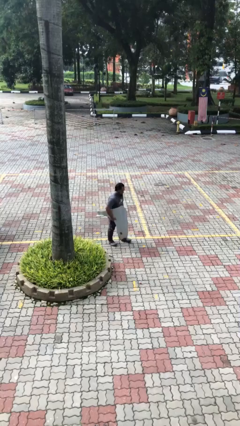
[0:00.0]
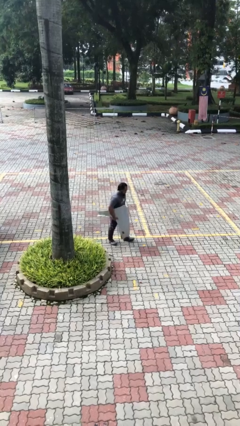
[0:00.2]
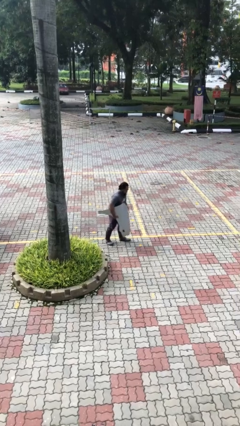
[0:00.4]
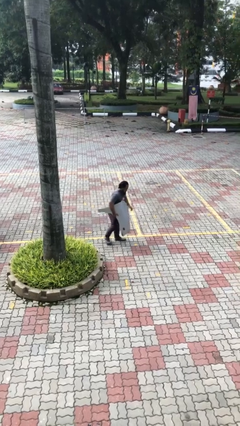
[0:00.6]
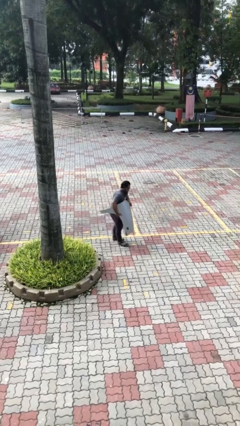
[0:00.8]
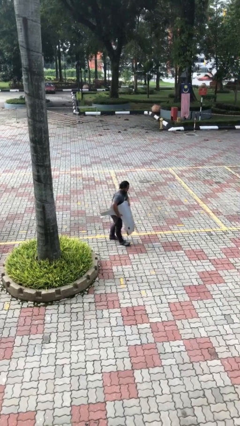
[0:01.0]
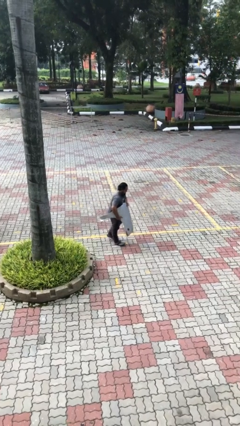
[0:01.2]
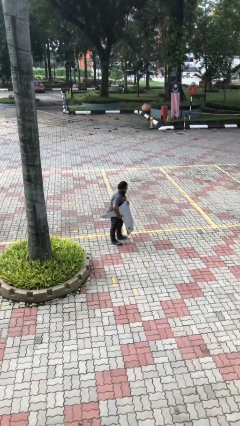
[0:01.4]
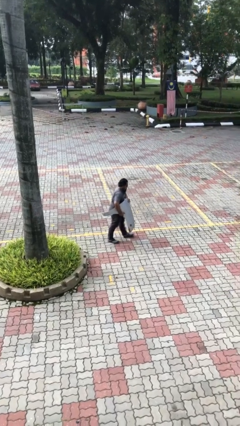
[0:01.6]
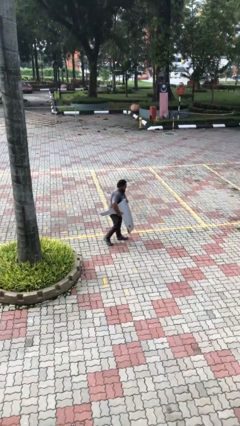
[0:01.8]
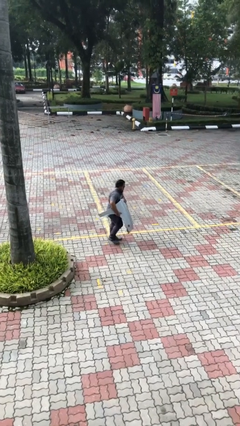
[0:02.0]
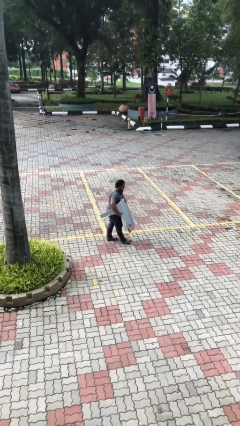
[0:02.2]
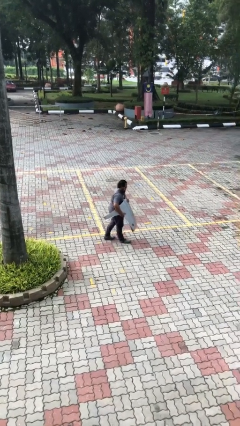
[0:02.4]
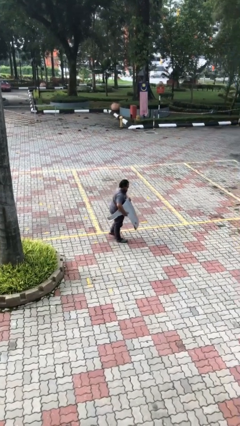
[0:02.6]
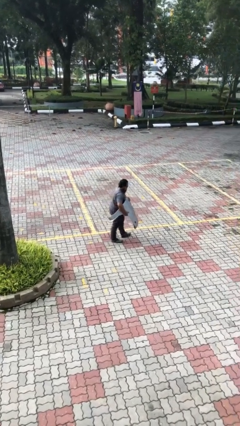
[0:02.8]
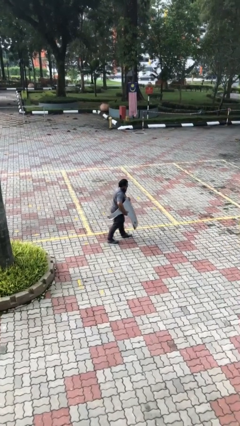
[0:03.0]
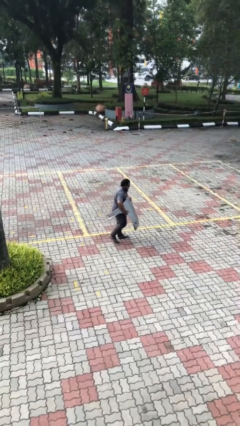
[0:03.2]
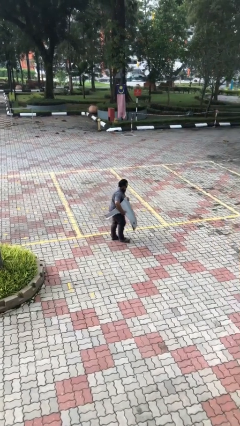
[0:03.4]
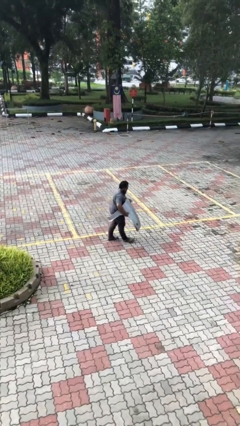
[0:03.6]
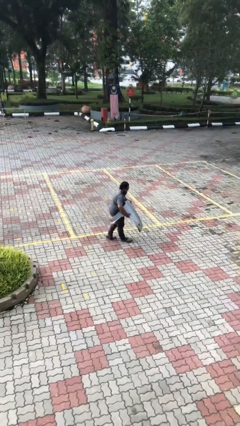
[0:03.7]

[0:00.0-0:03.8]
person carries heavy object

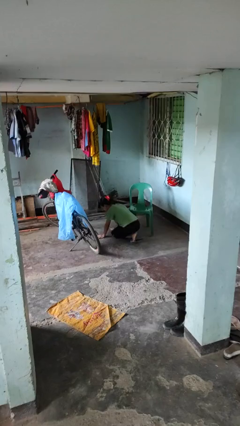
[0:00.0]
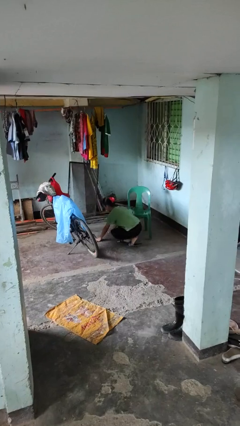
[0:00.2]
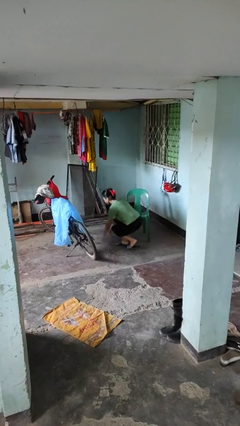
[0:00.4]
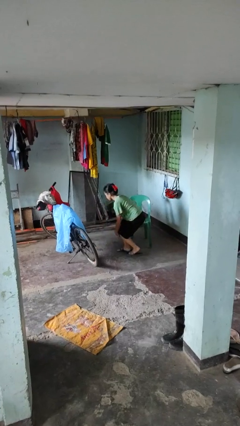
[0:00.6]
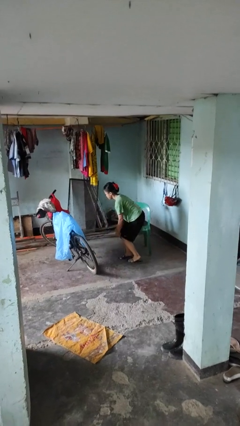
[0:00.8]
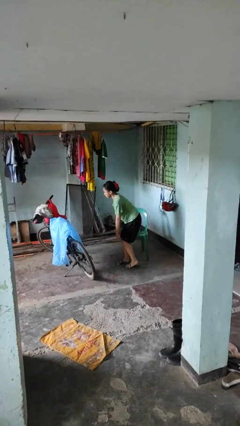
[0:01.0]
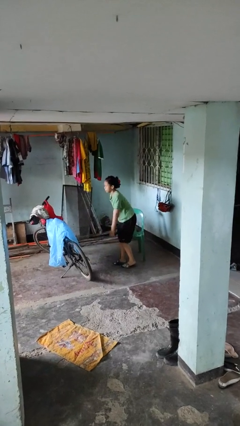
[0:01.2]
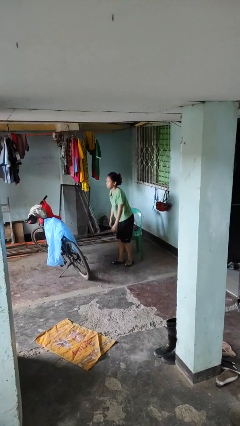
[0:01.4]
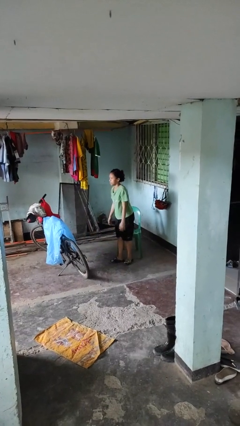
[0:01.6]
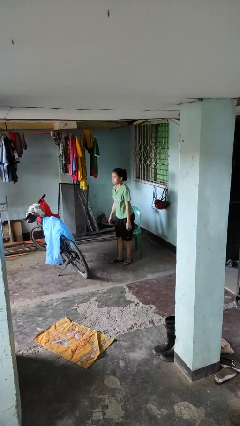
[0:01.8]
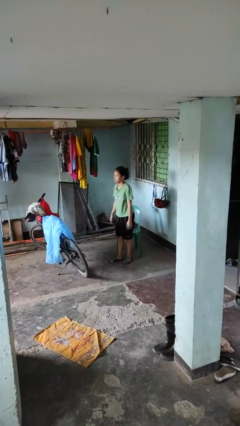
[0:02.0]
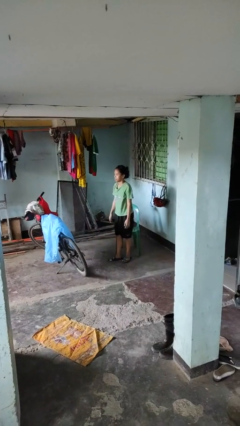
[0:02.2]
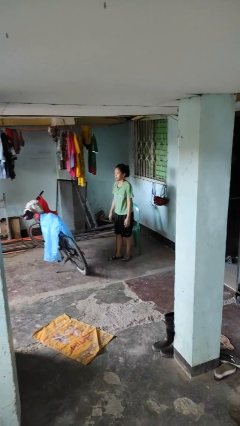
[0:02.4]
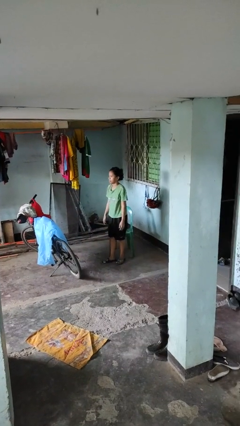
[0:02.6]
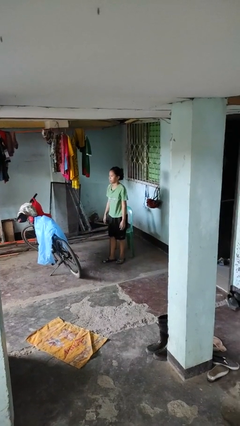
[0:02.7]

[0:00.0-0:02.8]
person stands up from floor

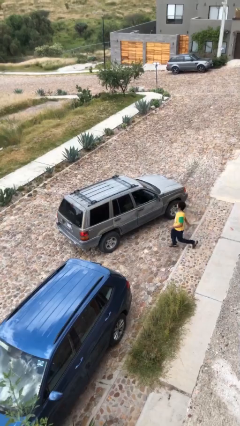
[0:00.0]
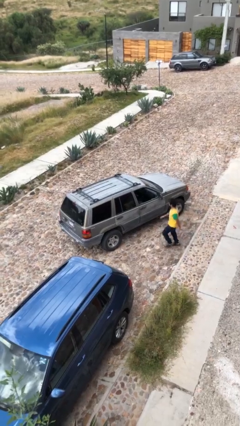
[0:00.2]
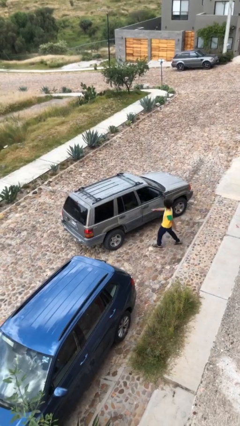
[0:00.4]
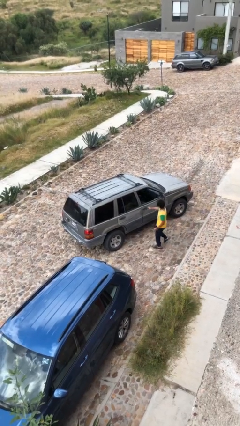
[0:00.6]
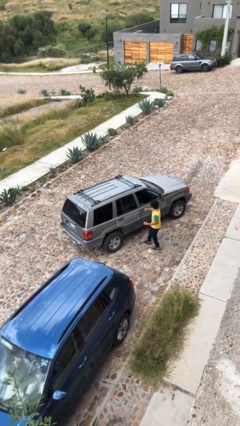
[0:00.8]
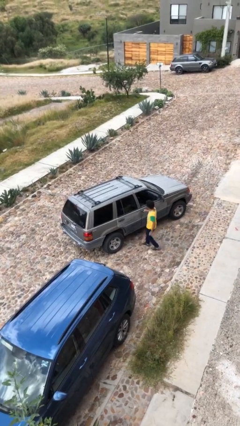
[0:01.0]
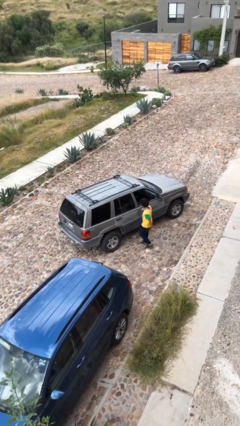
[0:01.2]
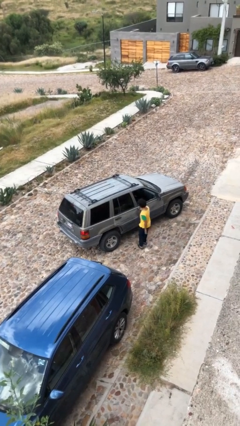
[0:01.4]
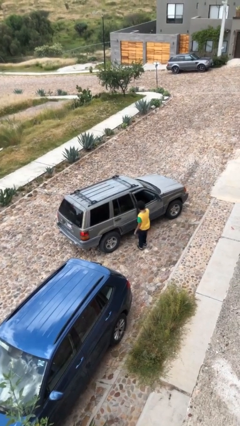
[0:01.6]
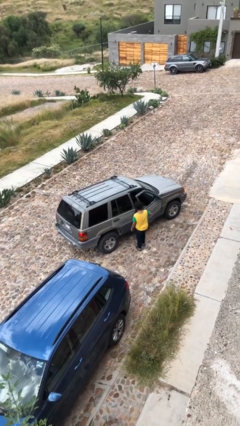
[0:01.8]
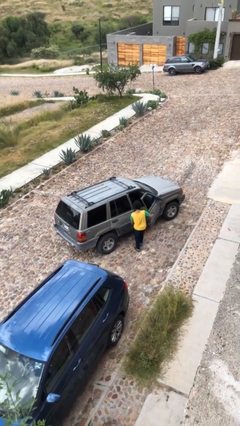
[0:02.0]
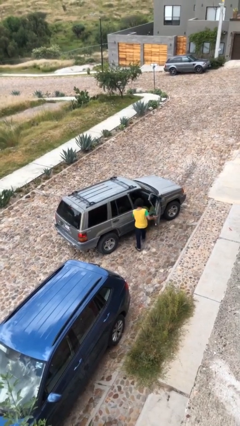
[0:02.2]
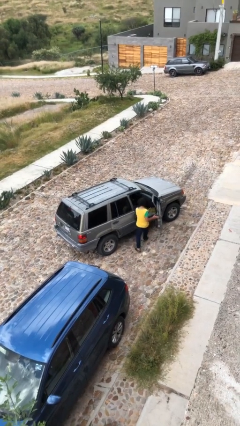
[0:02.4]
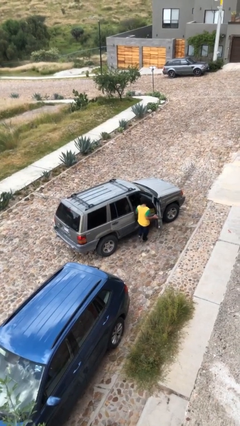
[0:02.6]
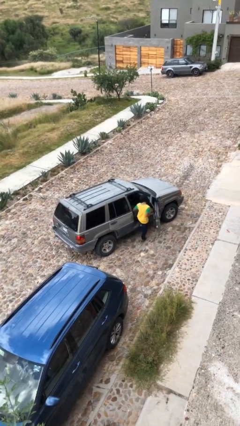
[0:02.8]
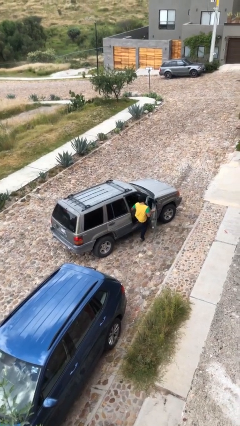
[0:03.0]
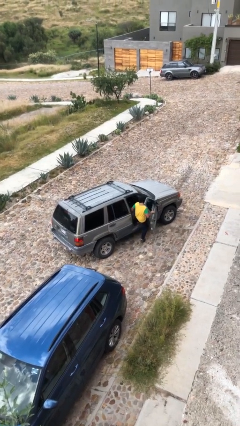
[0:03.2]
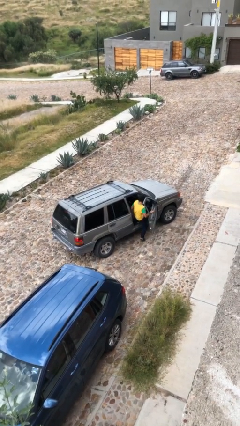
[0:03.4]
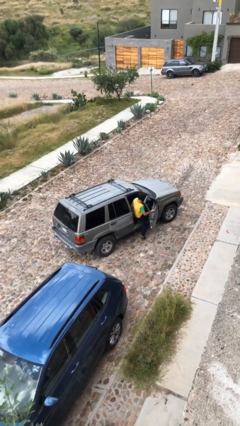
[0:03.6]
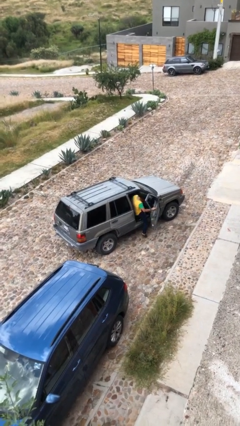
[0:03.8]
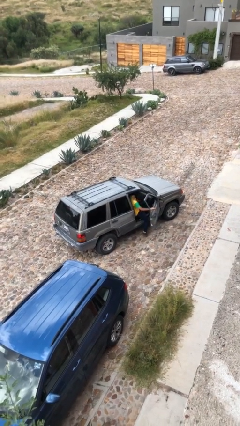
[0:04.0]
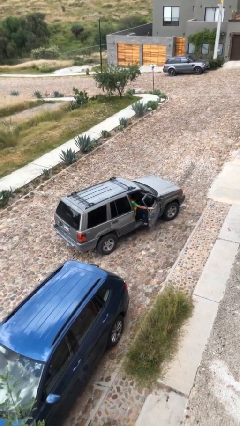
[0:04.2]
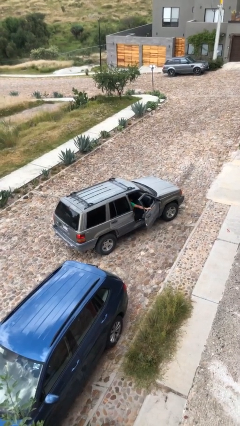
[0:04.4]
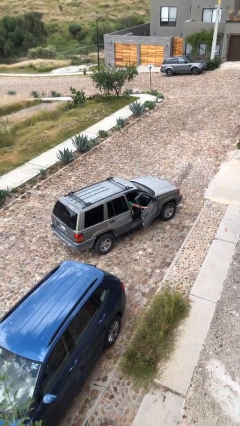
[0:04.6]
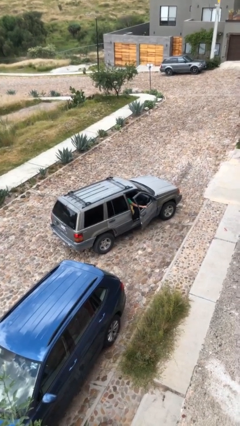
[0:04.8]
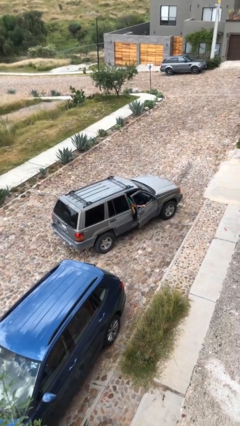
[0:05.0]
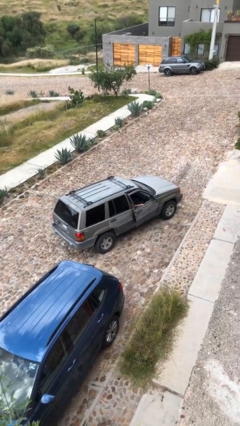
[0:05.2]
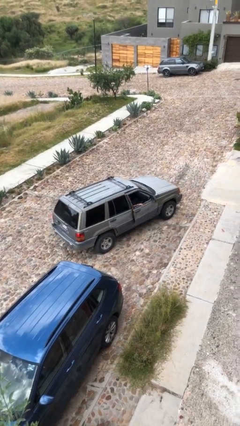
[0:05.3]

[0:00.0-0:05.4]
car picks up person

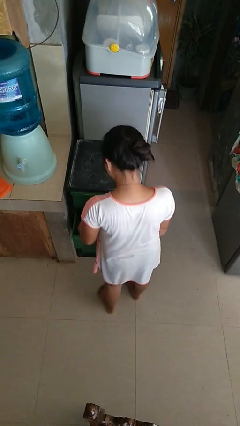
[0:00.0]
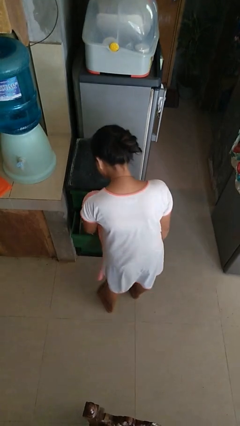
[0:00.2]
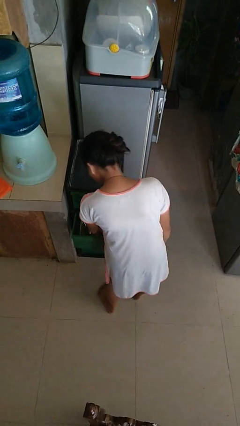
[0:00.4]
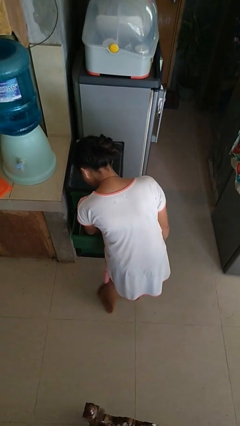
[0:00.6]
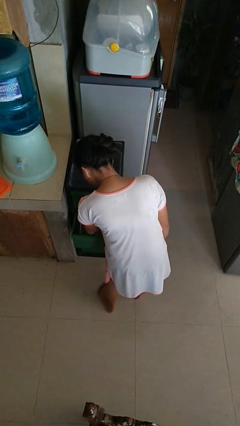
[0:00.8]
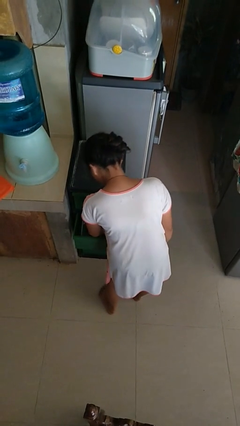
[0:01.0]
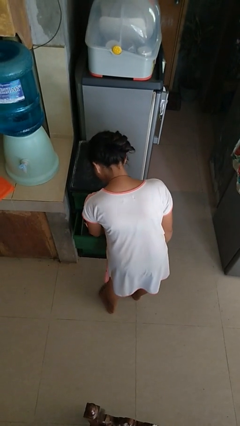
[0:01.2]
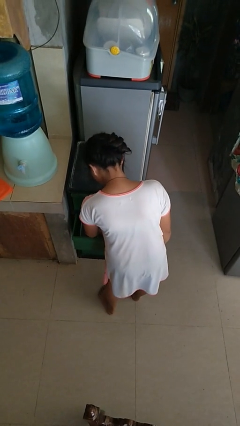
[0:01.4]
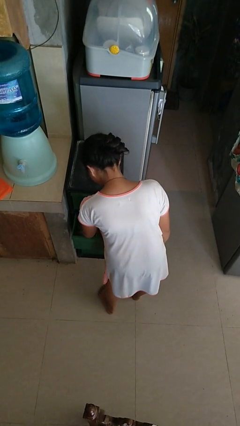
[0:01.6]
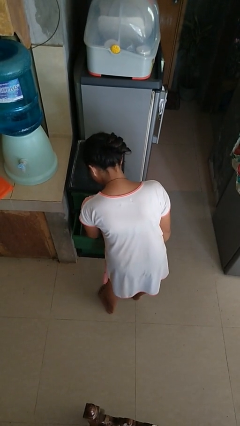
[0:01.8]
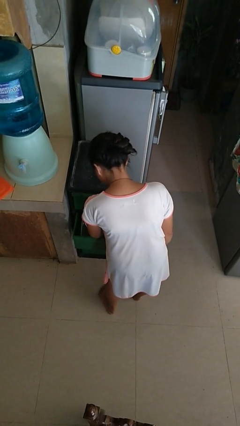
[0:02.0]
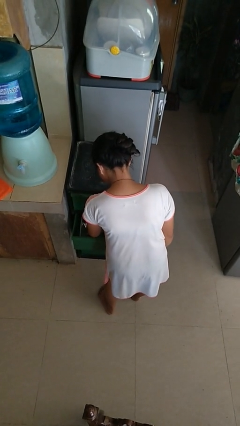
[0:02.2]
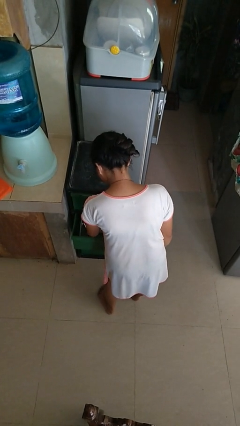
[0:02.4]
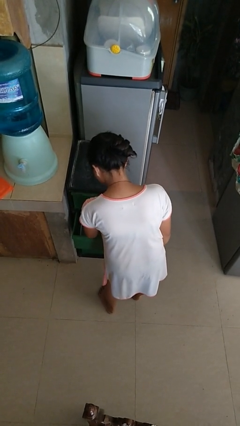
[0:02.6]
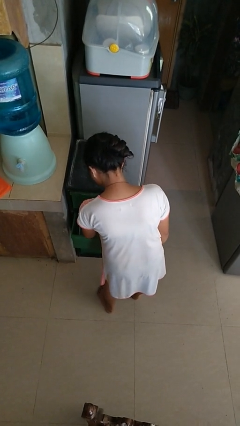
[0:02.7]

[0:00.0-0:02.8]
person searches in kitchen drawer

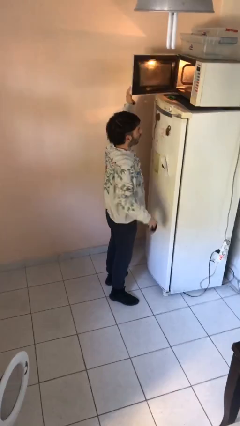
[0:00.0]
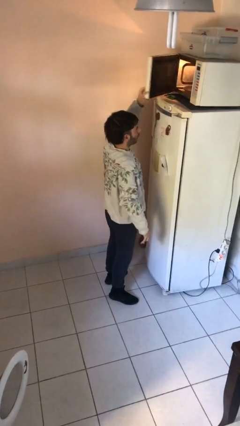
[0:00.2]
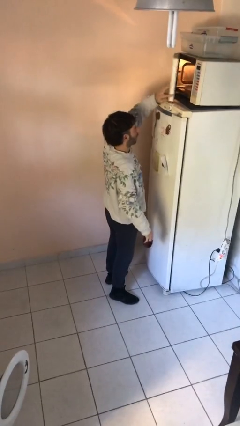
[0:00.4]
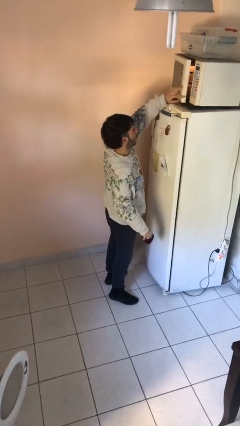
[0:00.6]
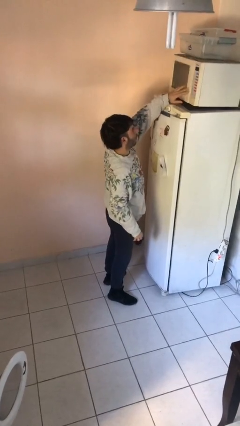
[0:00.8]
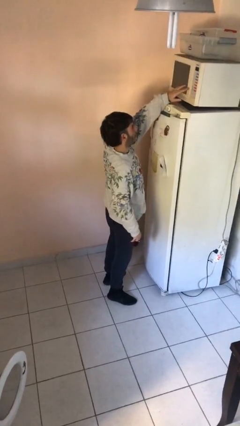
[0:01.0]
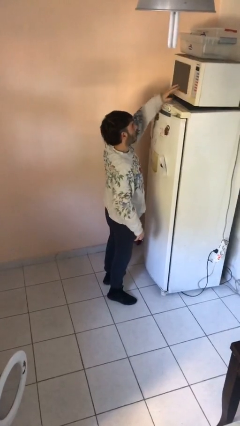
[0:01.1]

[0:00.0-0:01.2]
person closes microwave

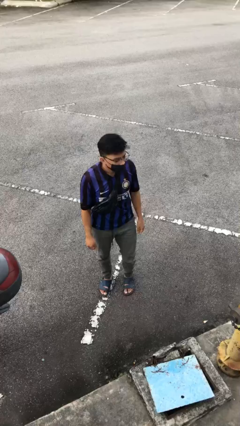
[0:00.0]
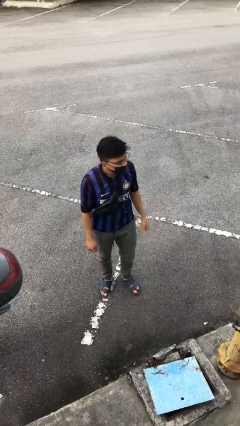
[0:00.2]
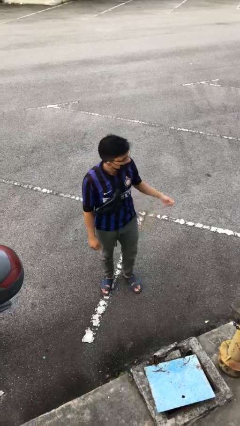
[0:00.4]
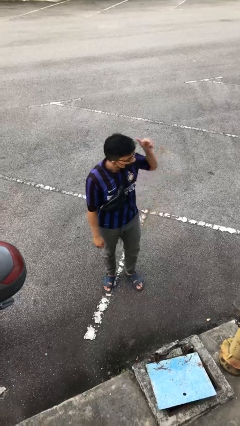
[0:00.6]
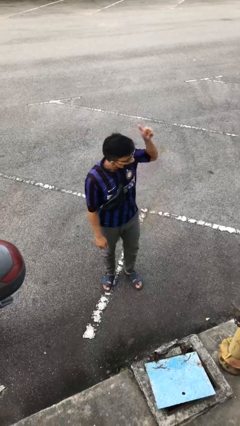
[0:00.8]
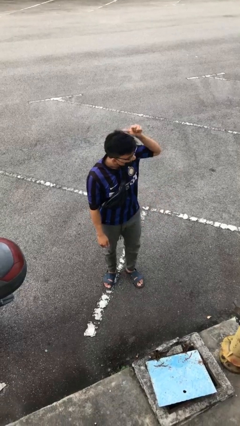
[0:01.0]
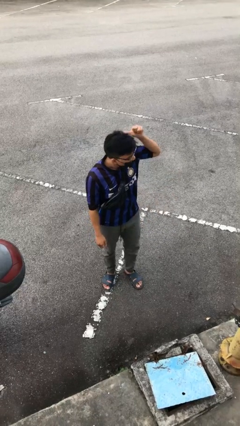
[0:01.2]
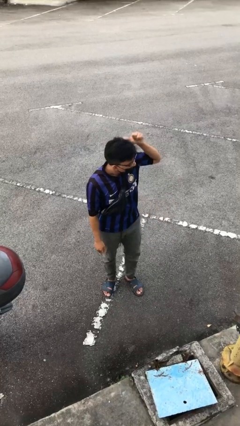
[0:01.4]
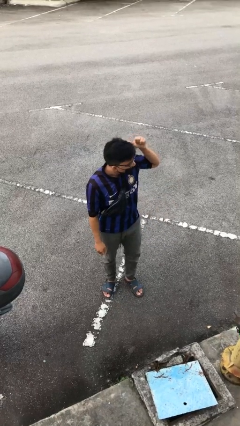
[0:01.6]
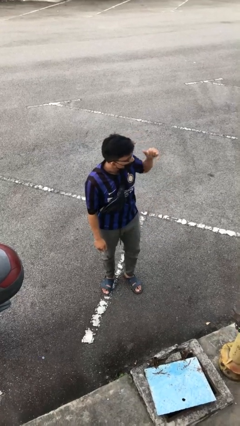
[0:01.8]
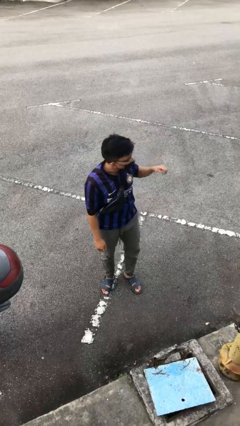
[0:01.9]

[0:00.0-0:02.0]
person gestures behind me
